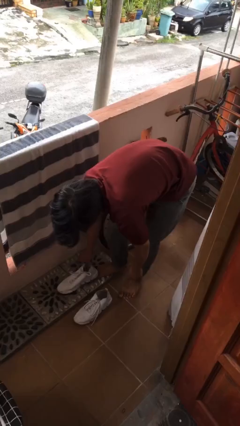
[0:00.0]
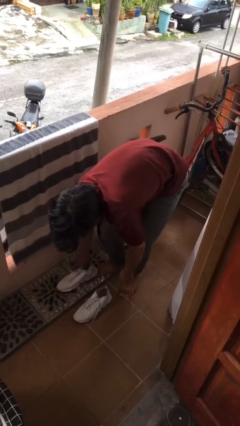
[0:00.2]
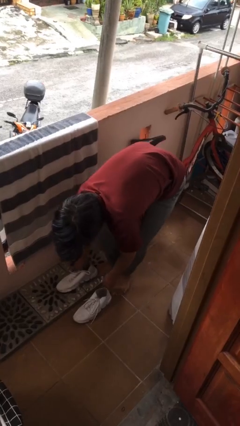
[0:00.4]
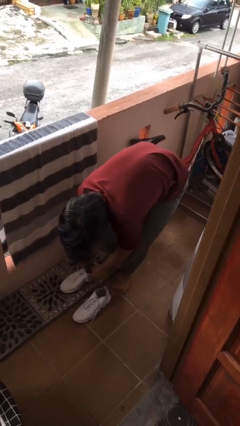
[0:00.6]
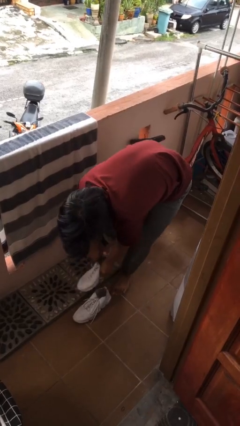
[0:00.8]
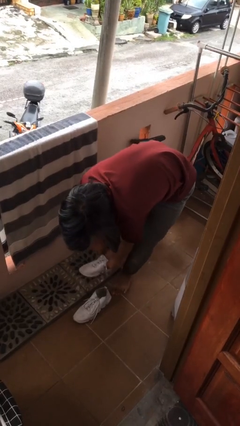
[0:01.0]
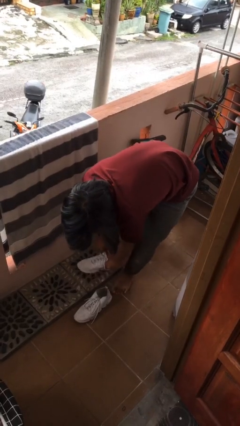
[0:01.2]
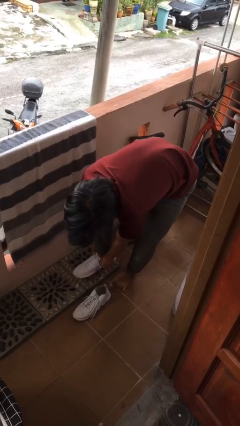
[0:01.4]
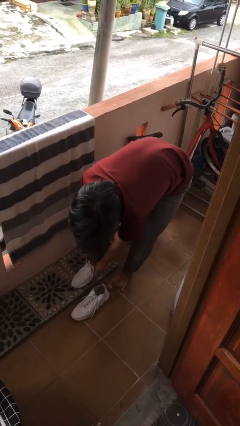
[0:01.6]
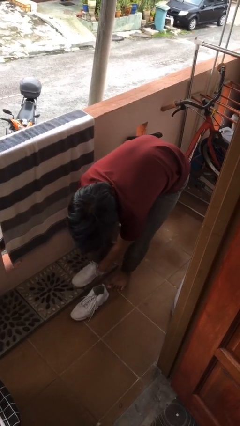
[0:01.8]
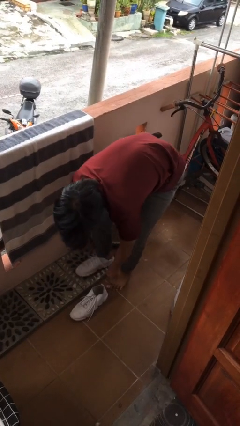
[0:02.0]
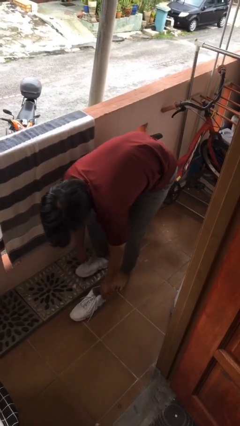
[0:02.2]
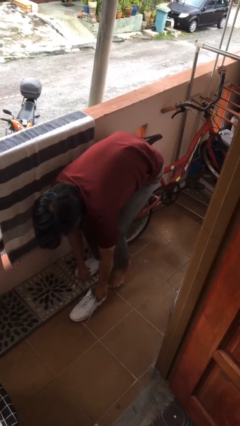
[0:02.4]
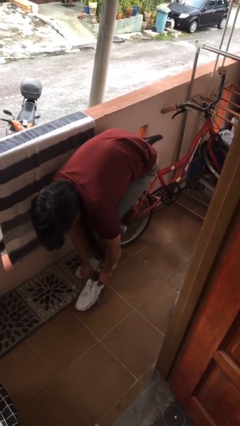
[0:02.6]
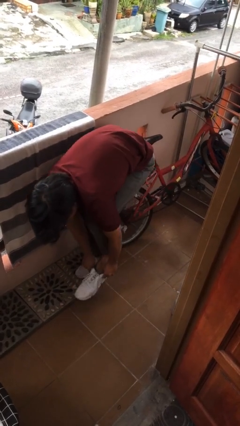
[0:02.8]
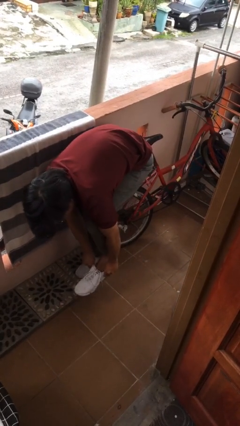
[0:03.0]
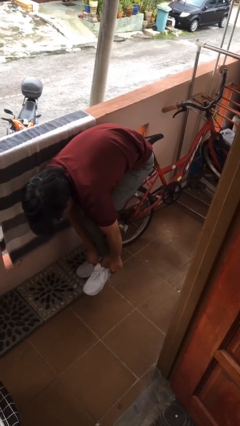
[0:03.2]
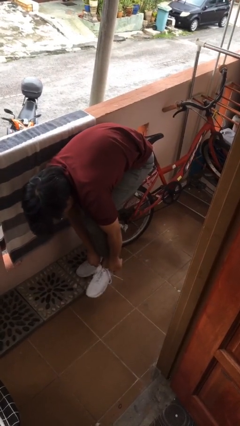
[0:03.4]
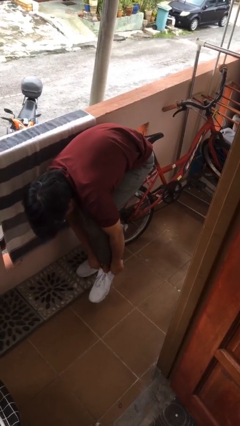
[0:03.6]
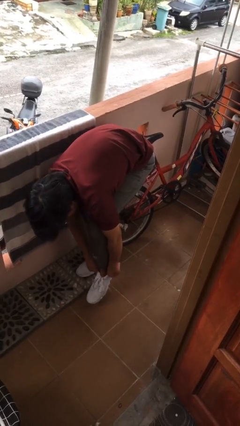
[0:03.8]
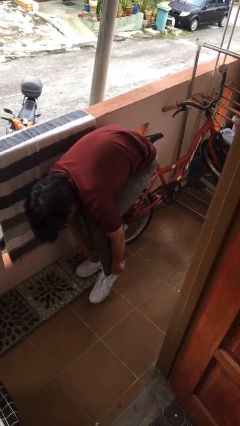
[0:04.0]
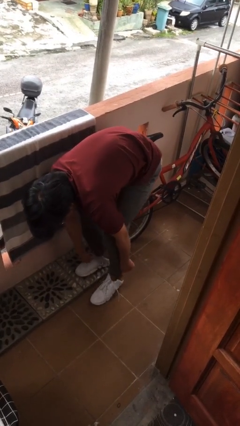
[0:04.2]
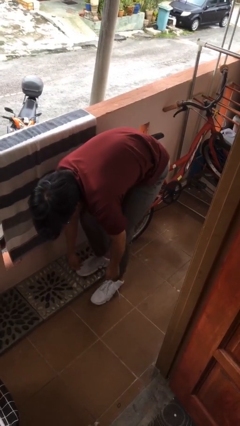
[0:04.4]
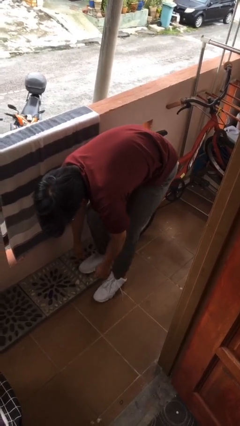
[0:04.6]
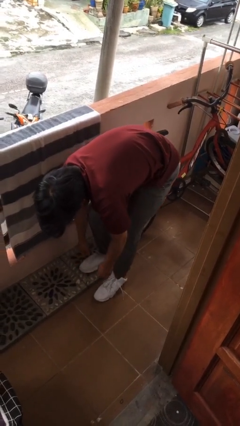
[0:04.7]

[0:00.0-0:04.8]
person puts on shoes

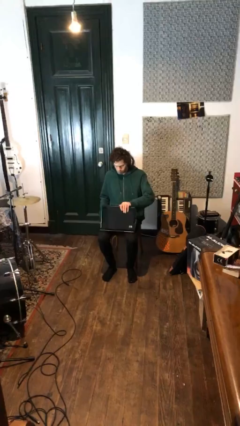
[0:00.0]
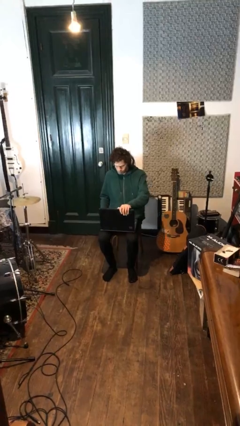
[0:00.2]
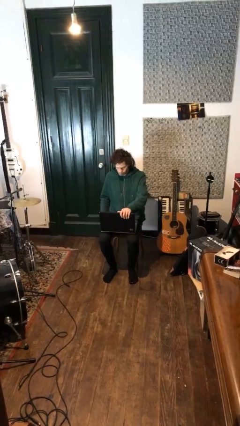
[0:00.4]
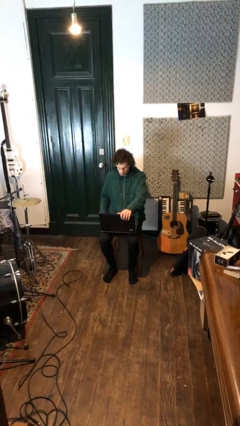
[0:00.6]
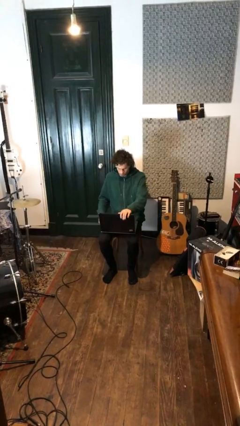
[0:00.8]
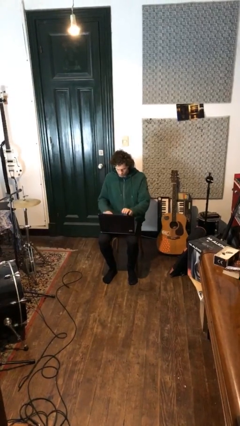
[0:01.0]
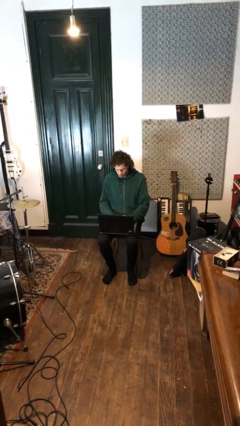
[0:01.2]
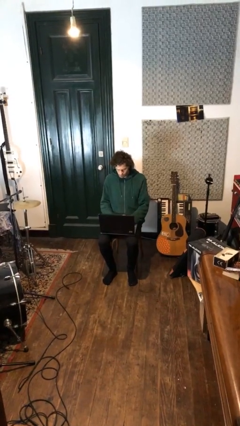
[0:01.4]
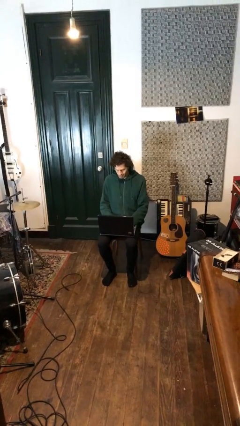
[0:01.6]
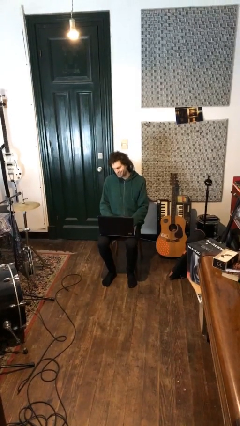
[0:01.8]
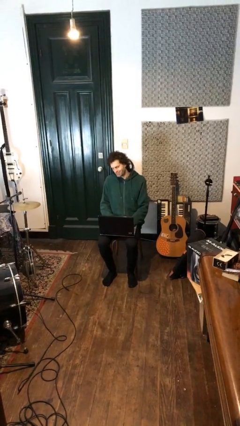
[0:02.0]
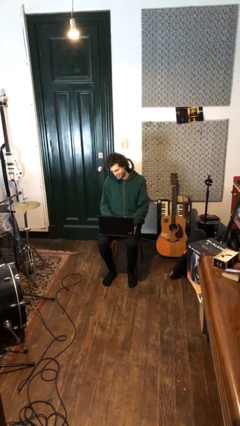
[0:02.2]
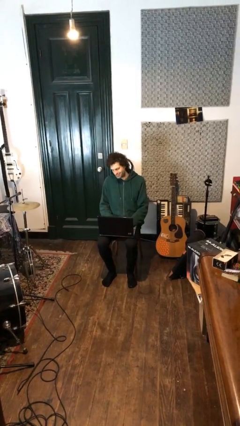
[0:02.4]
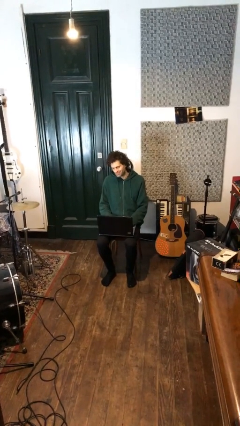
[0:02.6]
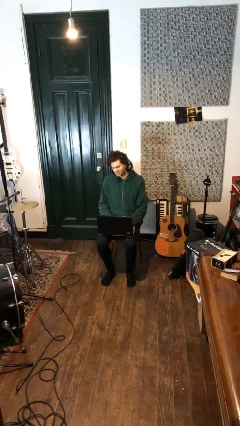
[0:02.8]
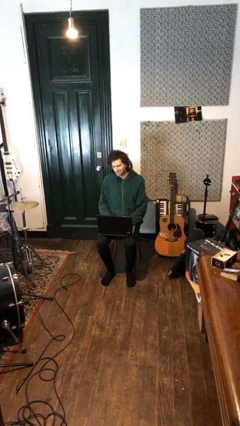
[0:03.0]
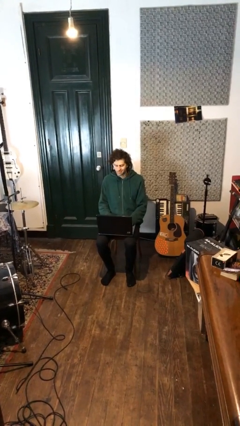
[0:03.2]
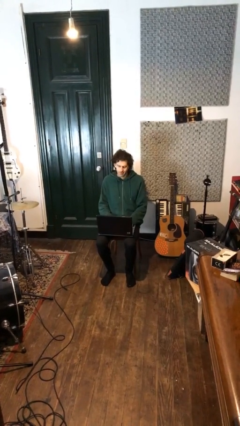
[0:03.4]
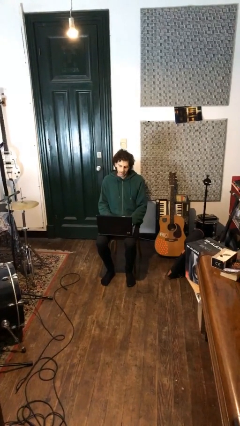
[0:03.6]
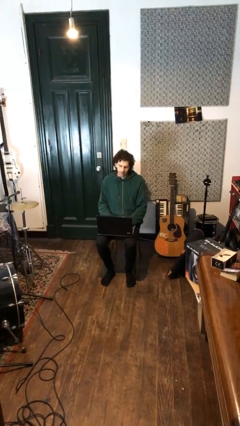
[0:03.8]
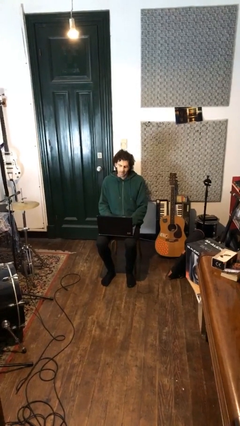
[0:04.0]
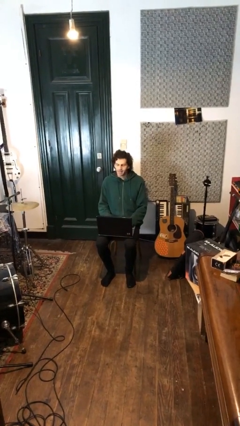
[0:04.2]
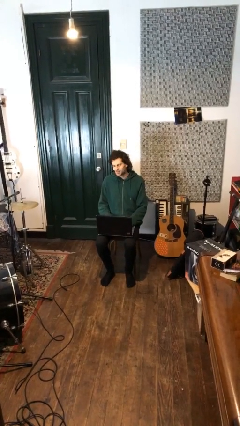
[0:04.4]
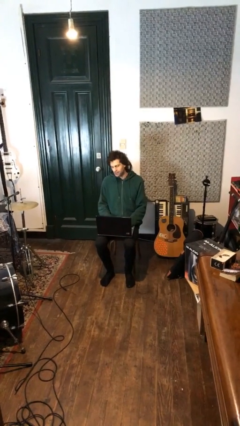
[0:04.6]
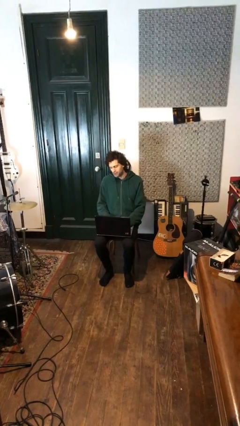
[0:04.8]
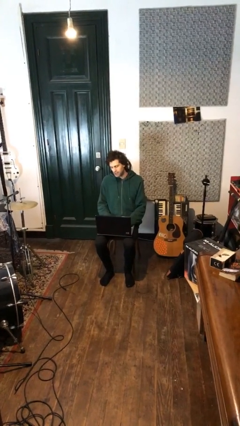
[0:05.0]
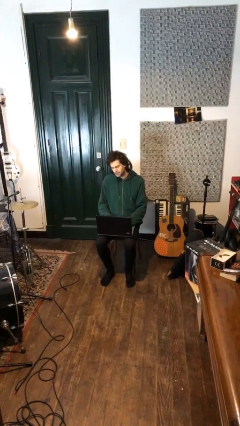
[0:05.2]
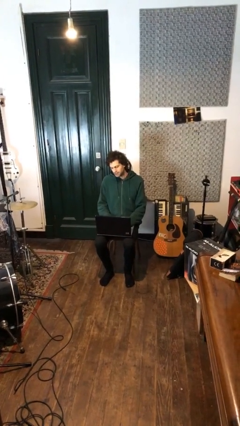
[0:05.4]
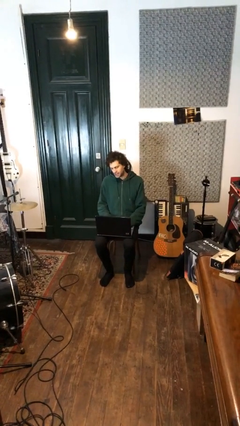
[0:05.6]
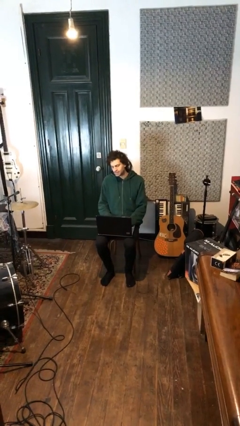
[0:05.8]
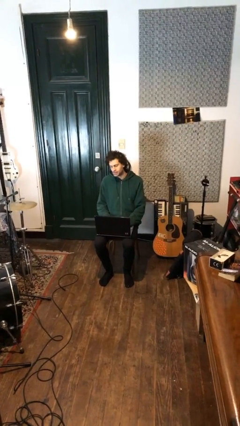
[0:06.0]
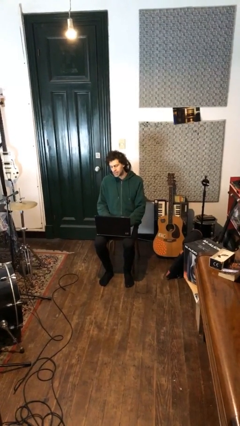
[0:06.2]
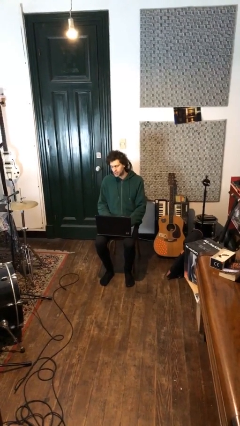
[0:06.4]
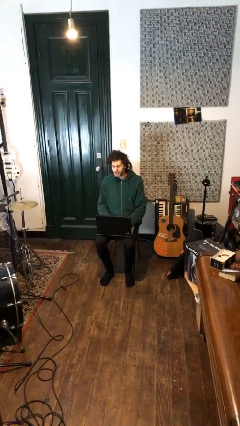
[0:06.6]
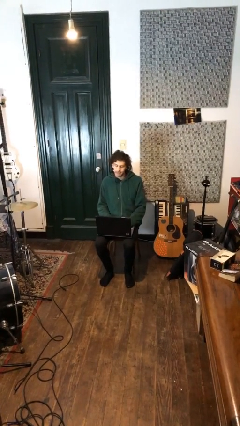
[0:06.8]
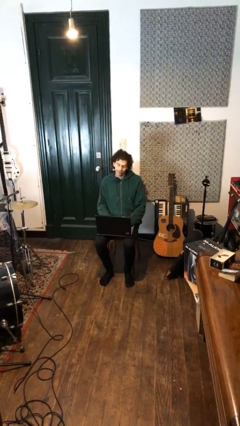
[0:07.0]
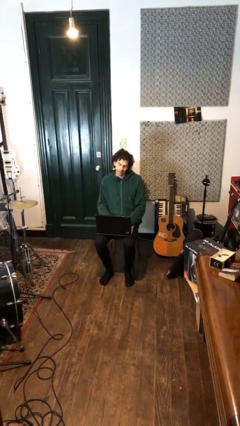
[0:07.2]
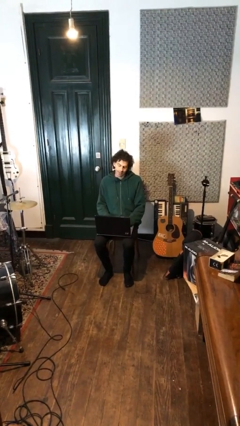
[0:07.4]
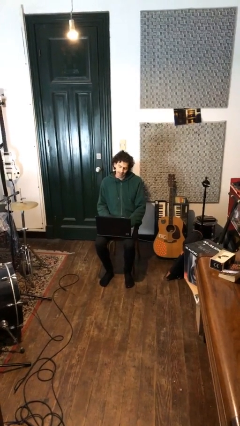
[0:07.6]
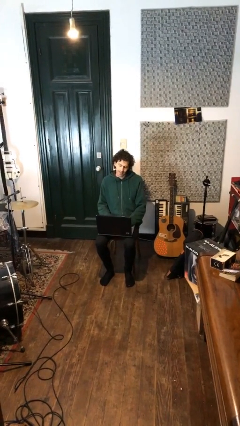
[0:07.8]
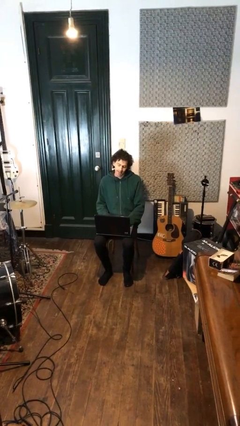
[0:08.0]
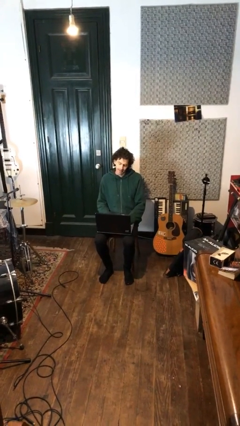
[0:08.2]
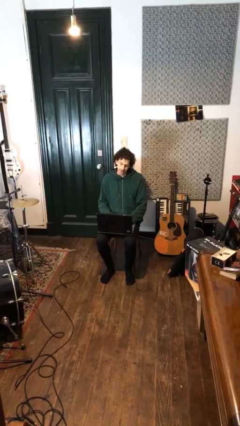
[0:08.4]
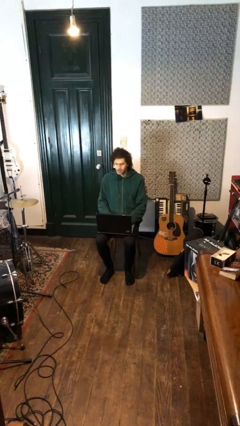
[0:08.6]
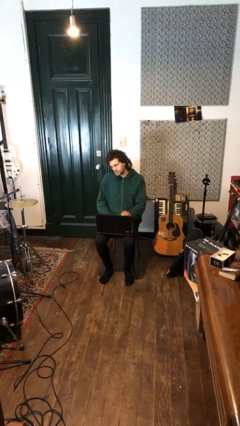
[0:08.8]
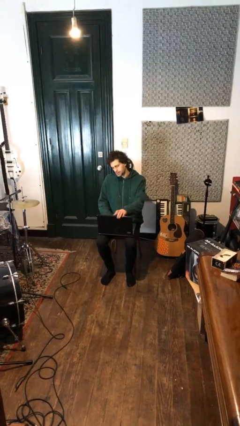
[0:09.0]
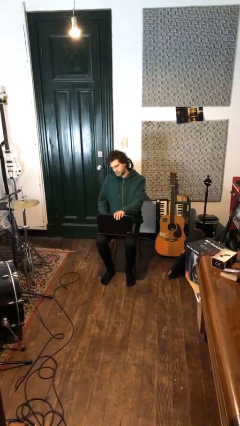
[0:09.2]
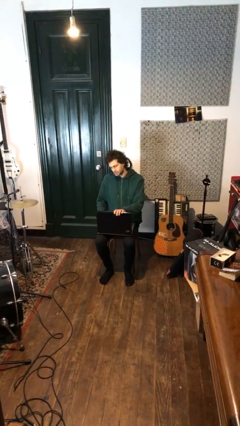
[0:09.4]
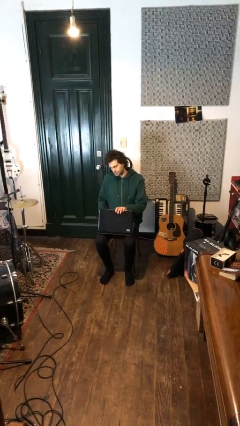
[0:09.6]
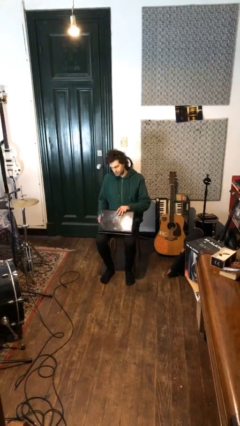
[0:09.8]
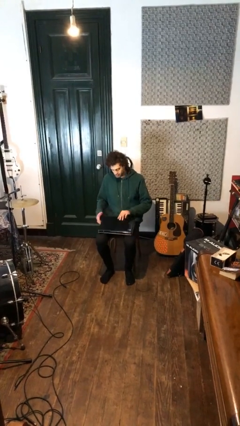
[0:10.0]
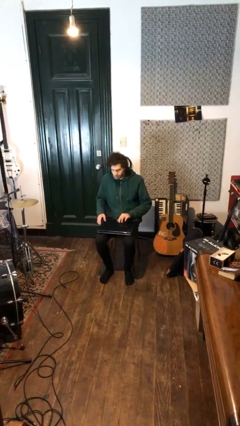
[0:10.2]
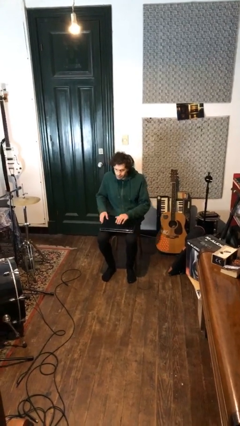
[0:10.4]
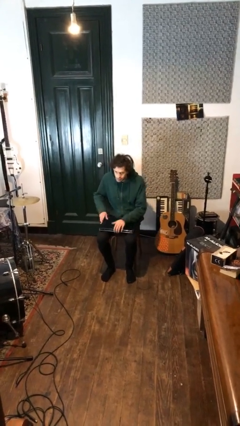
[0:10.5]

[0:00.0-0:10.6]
person interacts with laptop

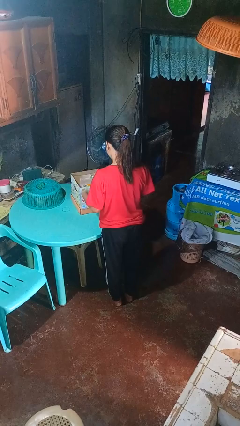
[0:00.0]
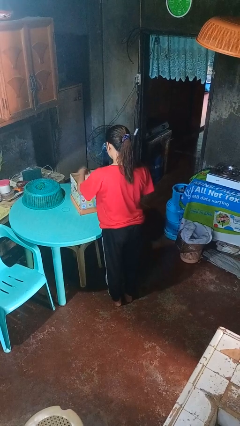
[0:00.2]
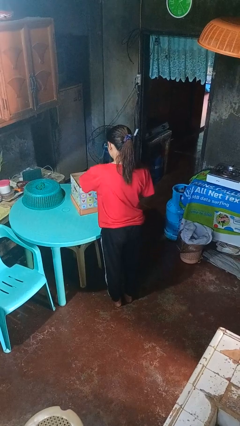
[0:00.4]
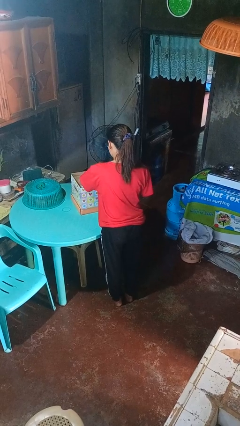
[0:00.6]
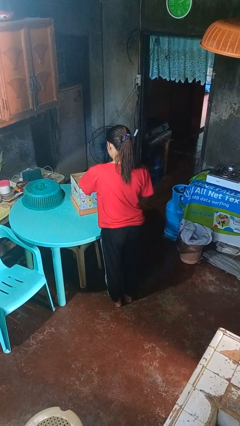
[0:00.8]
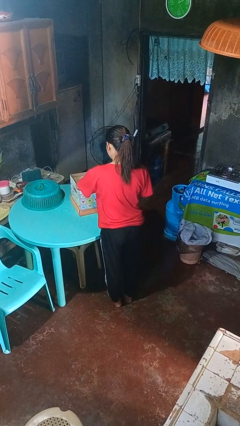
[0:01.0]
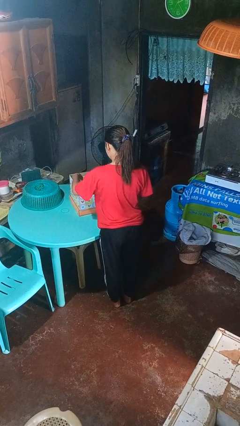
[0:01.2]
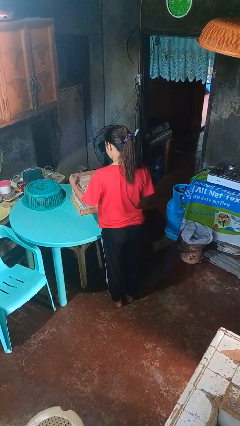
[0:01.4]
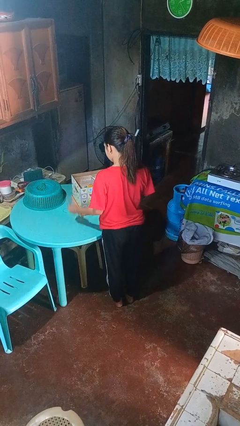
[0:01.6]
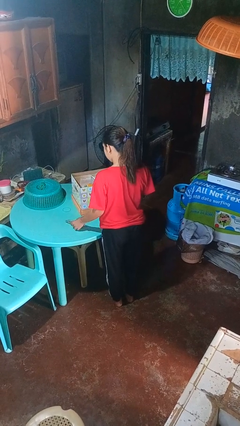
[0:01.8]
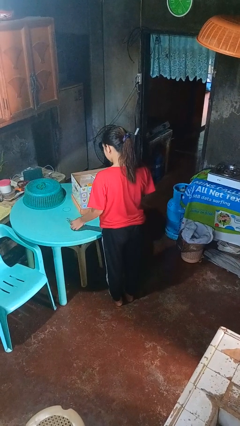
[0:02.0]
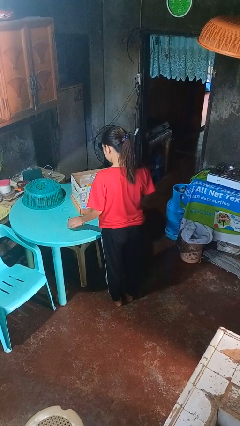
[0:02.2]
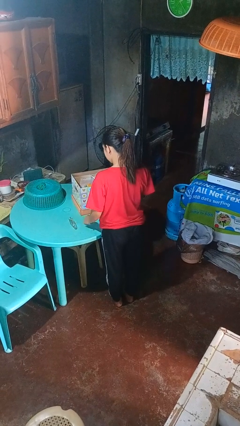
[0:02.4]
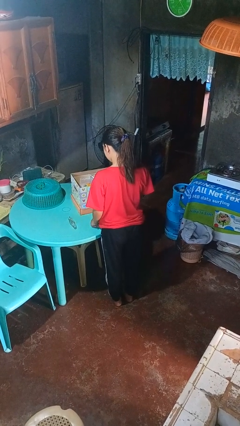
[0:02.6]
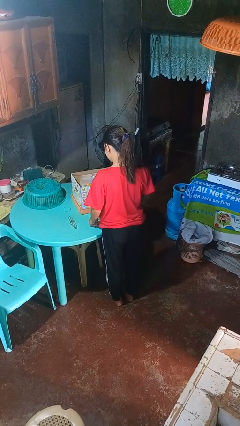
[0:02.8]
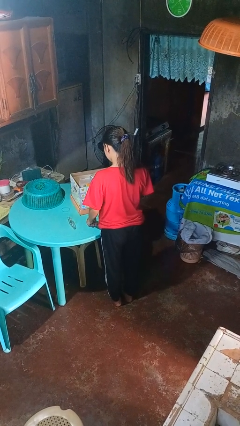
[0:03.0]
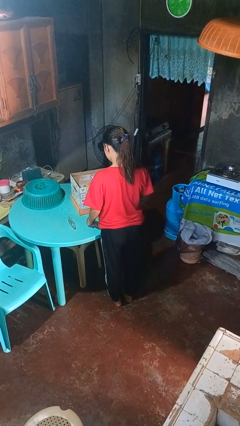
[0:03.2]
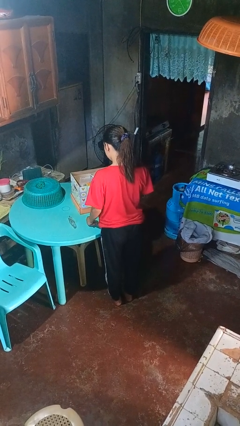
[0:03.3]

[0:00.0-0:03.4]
person takes object from box
